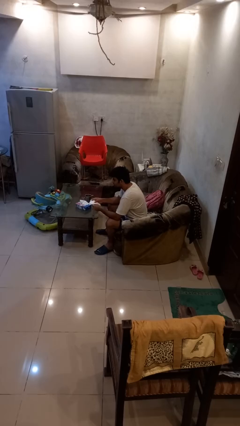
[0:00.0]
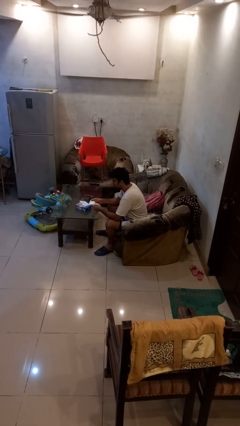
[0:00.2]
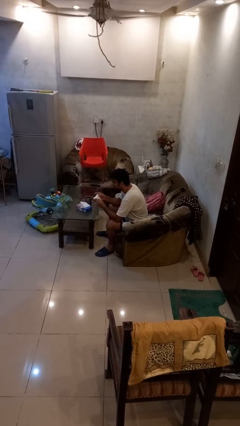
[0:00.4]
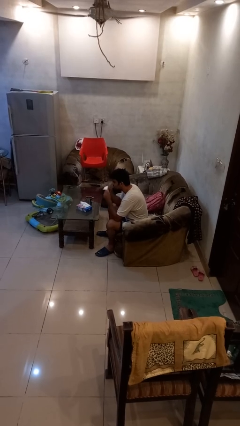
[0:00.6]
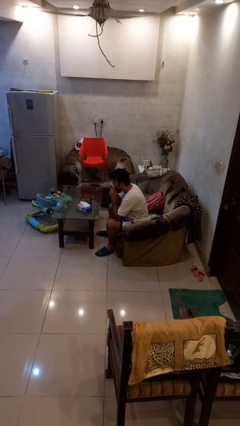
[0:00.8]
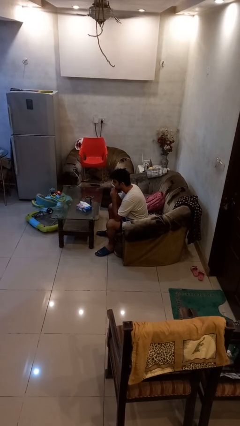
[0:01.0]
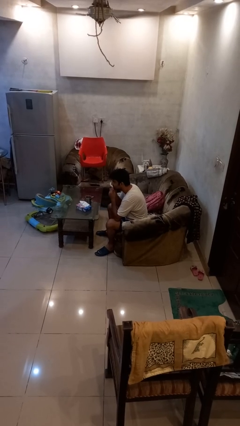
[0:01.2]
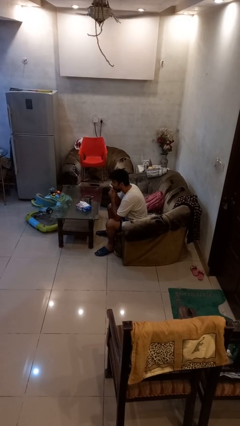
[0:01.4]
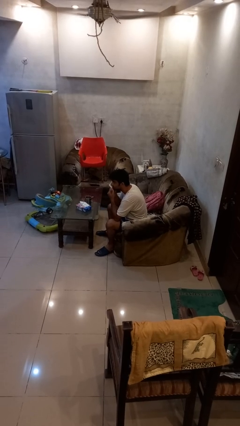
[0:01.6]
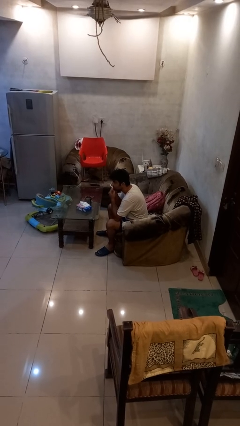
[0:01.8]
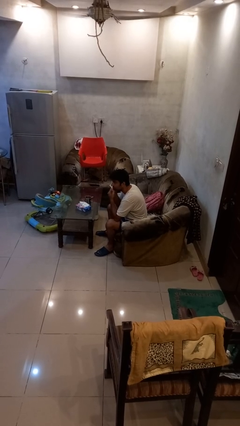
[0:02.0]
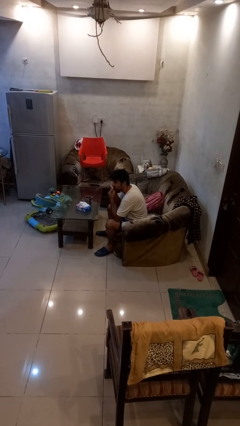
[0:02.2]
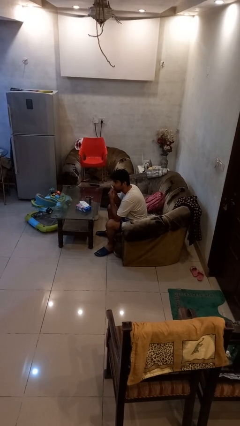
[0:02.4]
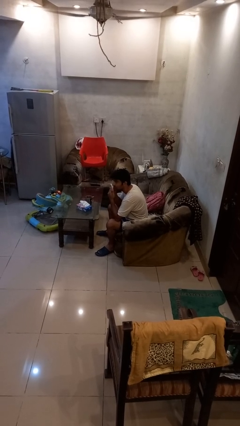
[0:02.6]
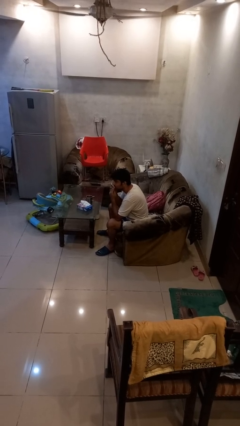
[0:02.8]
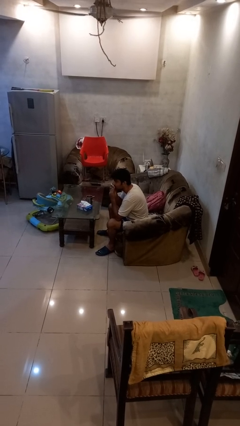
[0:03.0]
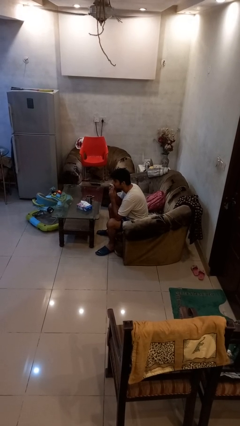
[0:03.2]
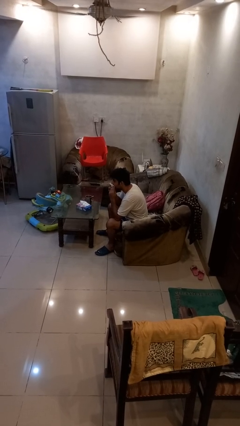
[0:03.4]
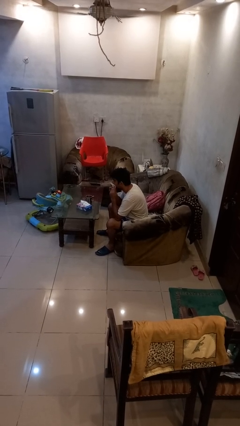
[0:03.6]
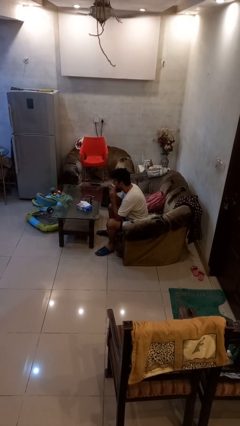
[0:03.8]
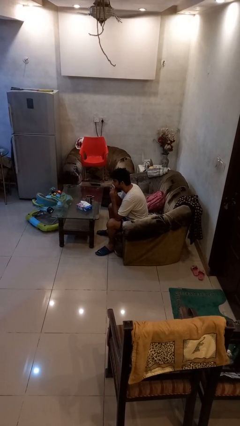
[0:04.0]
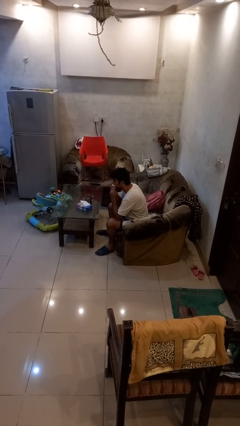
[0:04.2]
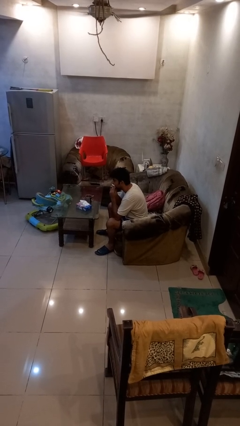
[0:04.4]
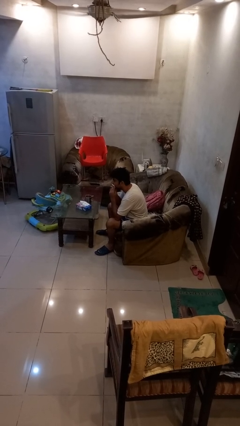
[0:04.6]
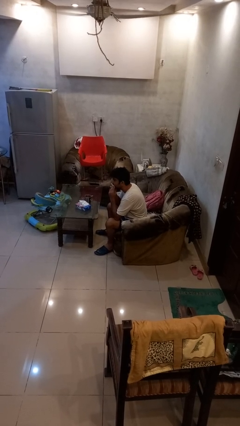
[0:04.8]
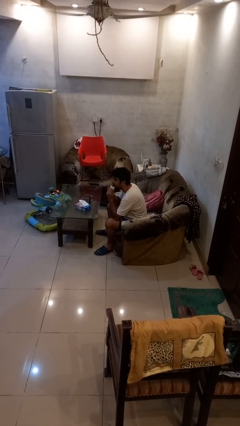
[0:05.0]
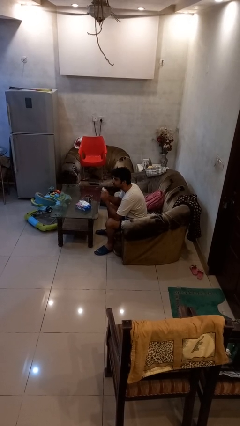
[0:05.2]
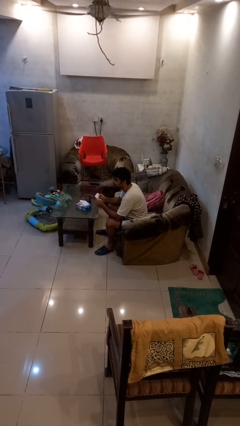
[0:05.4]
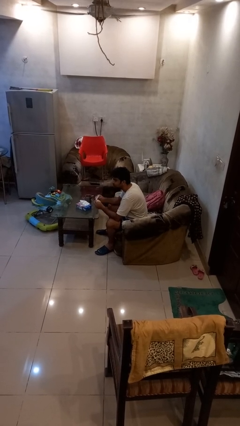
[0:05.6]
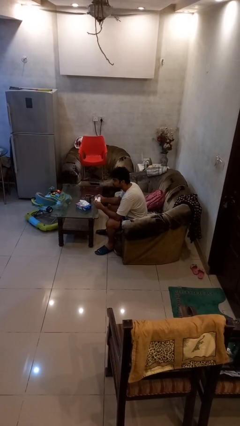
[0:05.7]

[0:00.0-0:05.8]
person wipes mouth with napkin

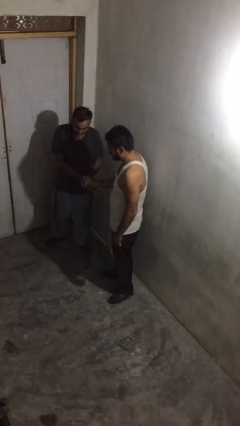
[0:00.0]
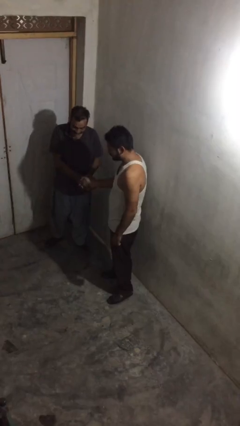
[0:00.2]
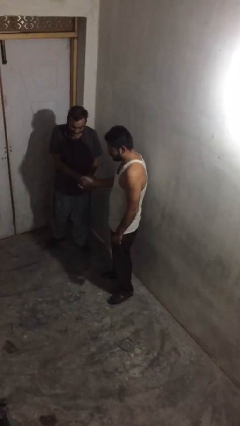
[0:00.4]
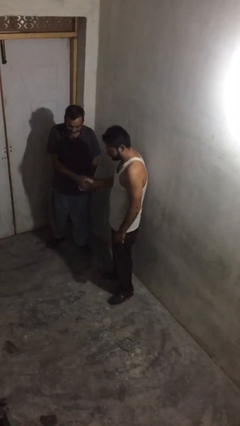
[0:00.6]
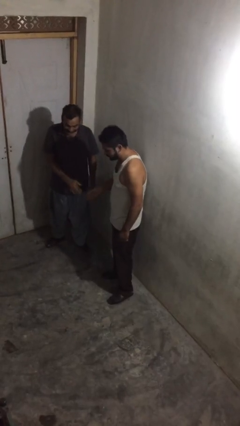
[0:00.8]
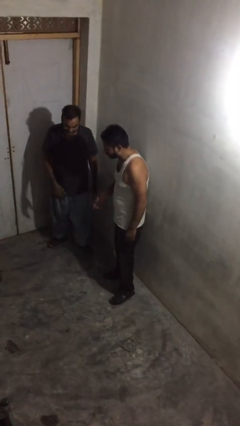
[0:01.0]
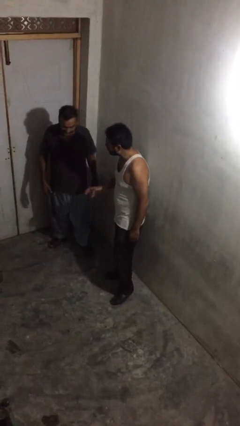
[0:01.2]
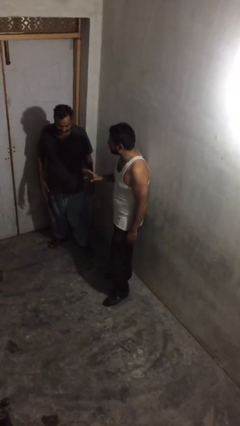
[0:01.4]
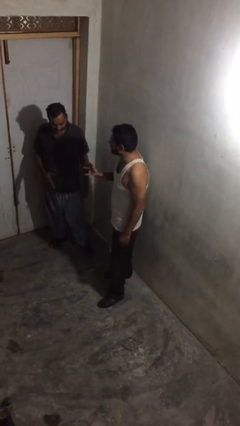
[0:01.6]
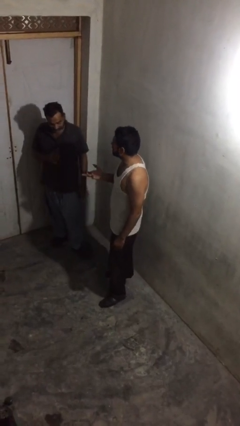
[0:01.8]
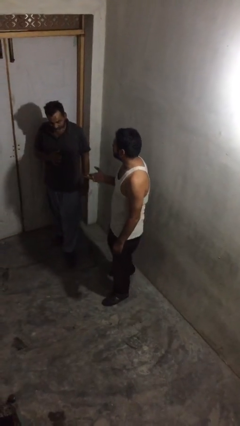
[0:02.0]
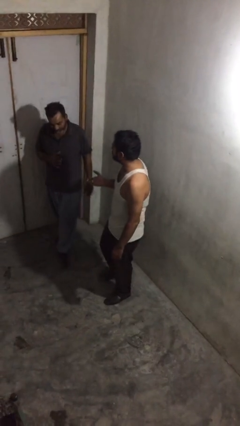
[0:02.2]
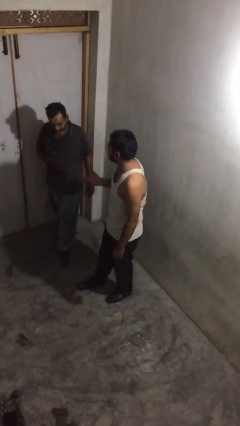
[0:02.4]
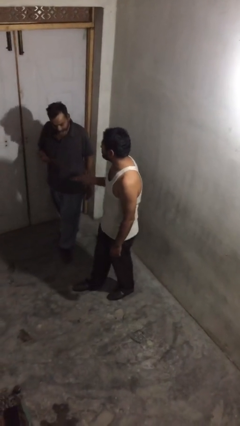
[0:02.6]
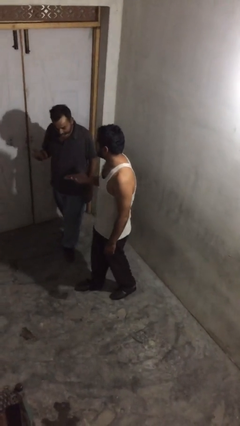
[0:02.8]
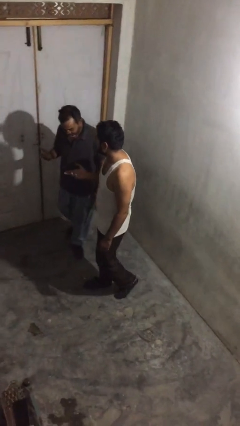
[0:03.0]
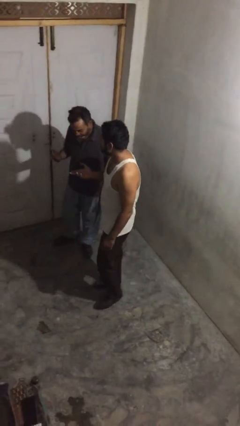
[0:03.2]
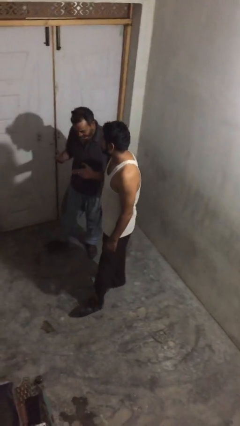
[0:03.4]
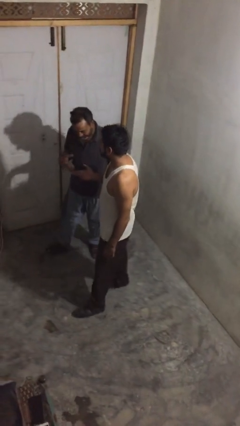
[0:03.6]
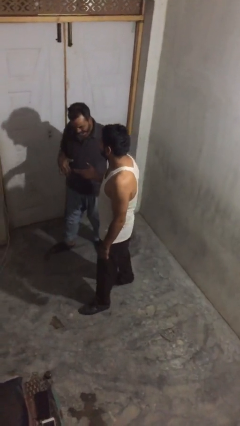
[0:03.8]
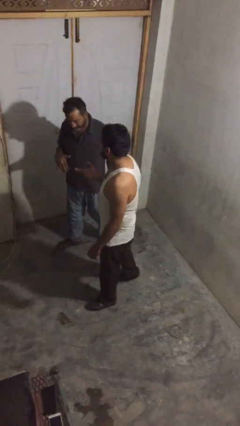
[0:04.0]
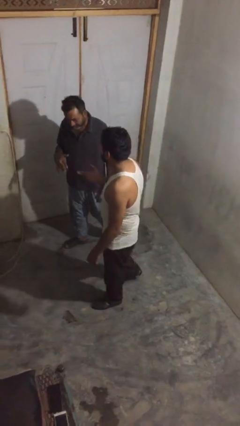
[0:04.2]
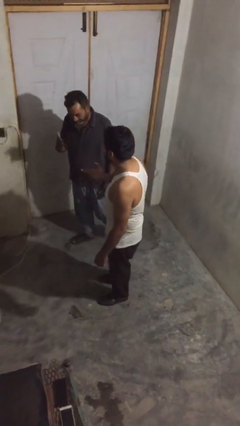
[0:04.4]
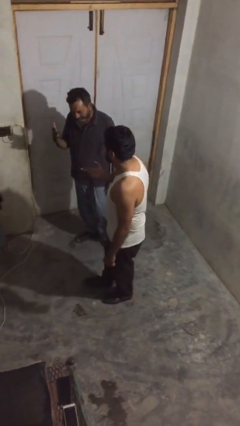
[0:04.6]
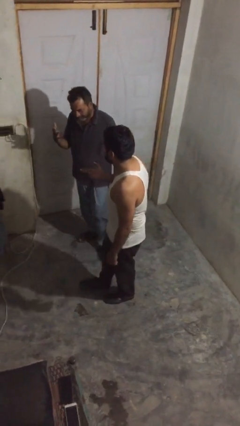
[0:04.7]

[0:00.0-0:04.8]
person talks to person

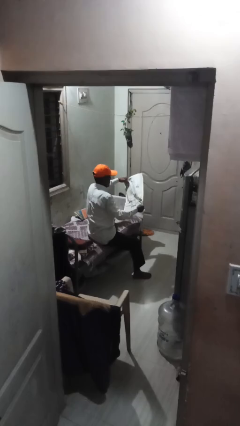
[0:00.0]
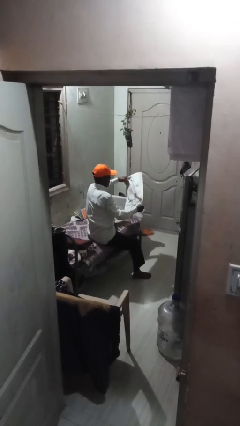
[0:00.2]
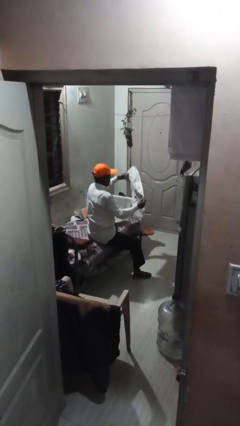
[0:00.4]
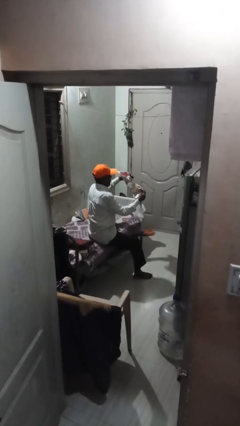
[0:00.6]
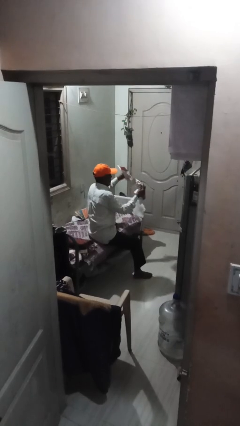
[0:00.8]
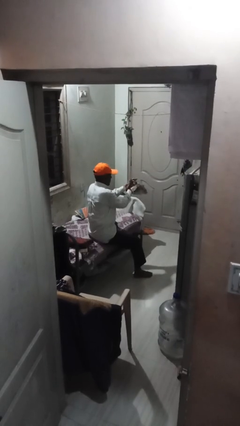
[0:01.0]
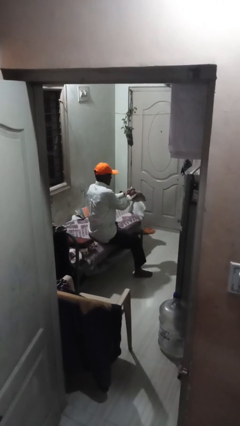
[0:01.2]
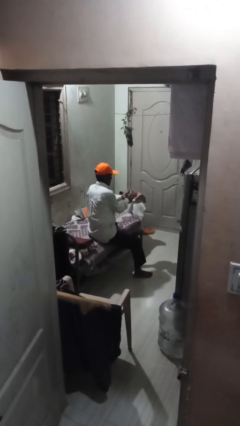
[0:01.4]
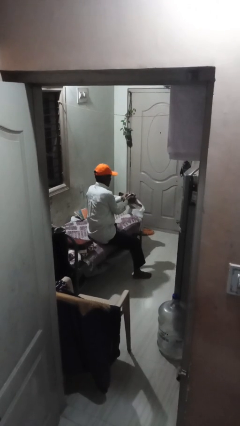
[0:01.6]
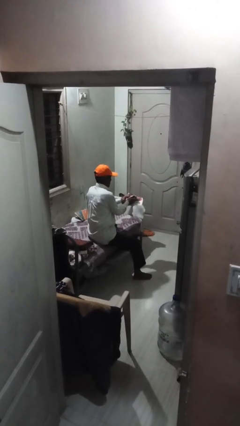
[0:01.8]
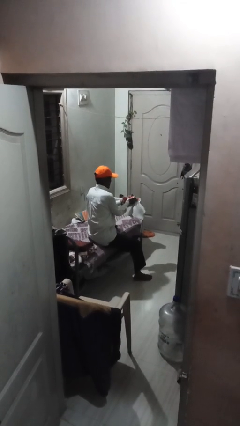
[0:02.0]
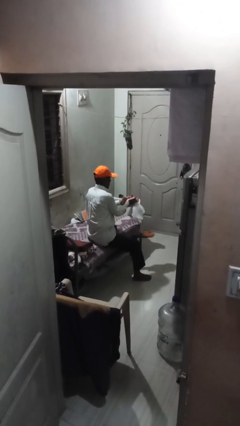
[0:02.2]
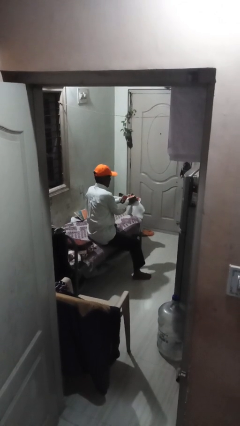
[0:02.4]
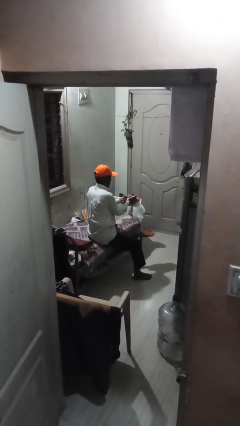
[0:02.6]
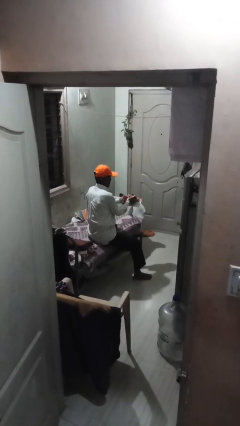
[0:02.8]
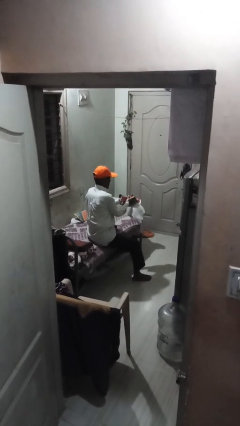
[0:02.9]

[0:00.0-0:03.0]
person crumples paper

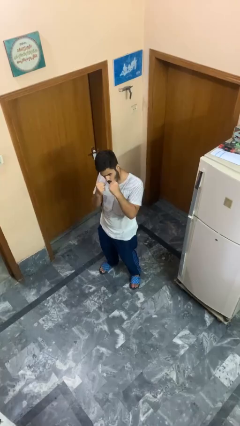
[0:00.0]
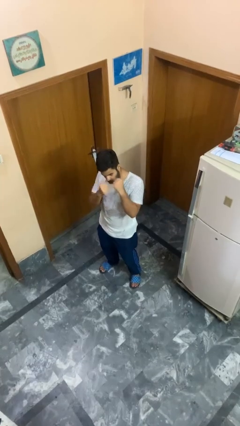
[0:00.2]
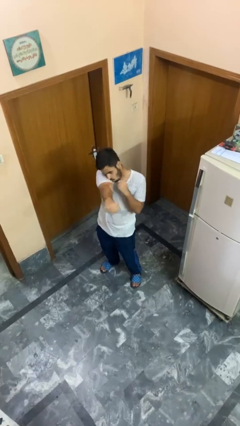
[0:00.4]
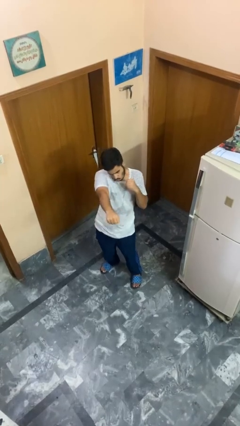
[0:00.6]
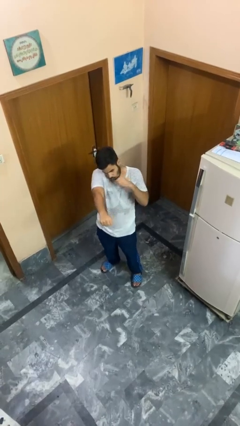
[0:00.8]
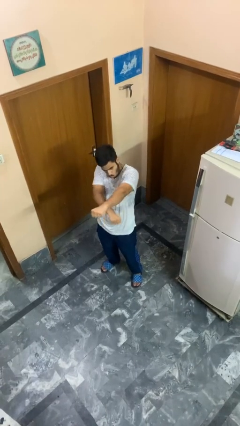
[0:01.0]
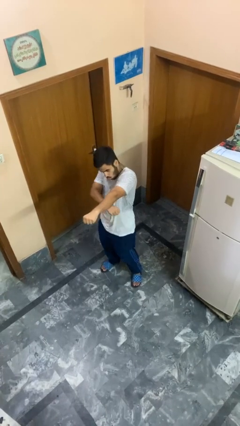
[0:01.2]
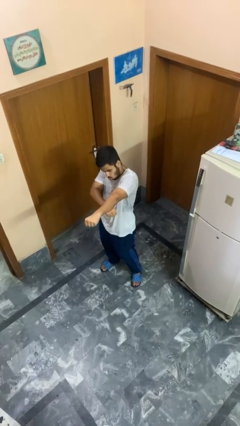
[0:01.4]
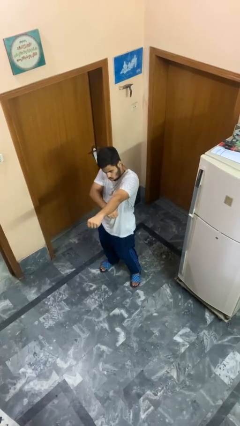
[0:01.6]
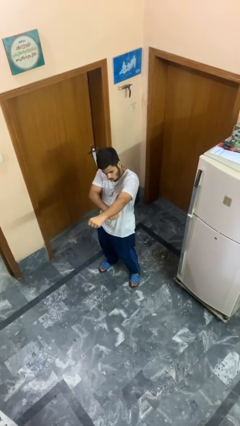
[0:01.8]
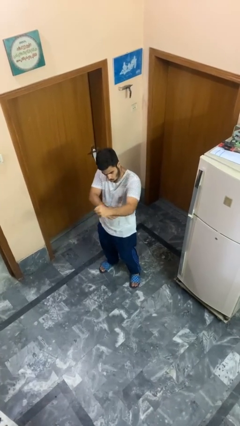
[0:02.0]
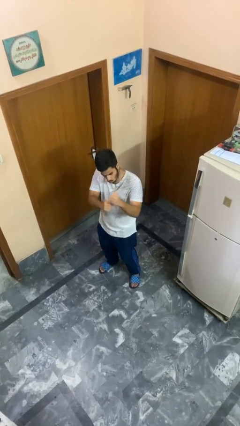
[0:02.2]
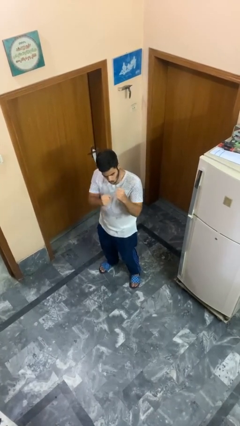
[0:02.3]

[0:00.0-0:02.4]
person punches

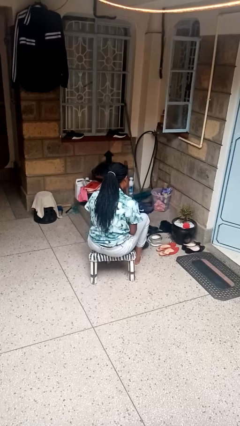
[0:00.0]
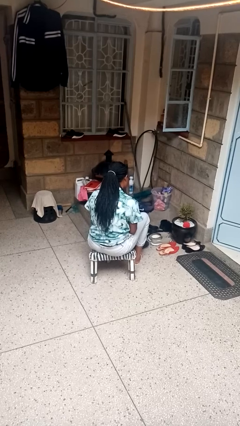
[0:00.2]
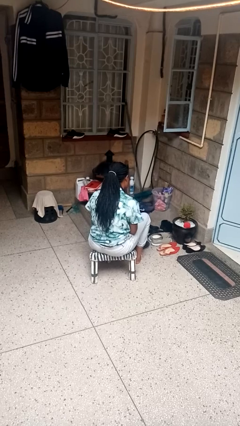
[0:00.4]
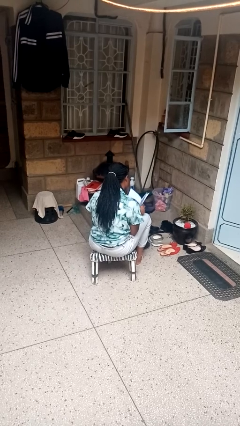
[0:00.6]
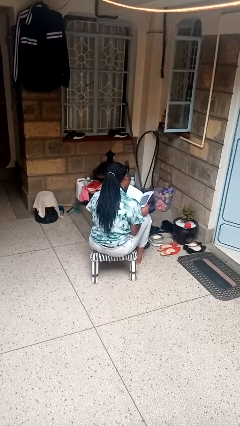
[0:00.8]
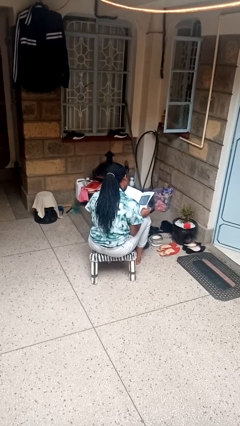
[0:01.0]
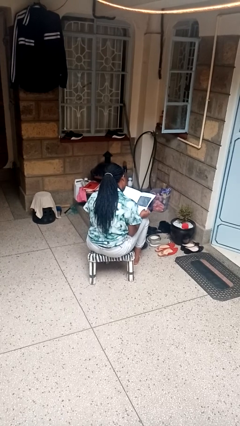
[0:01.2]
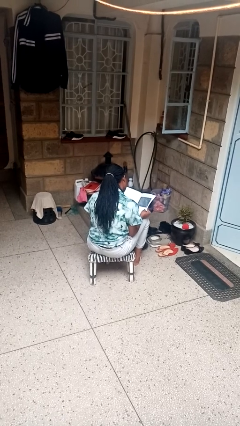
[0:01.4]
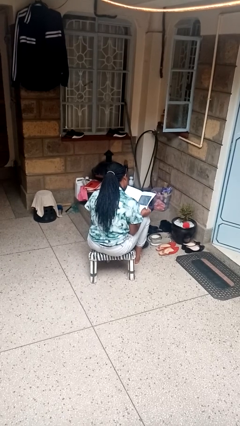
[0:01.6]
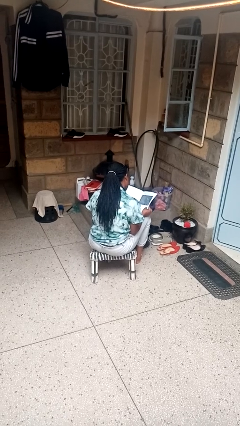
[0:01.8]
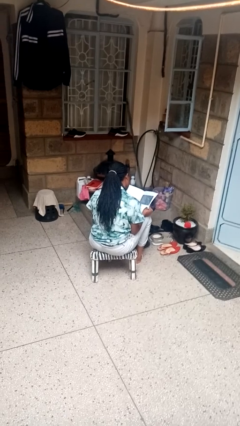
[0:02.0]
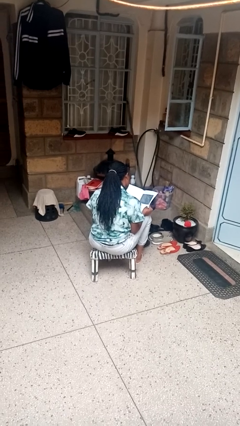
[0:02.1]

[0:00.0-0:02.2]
person reads magazine
